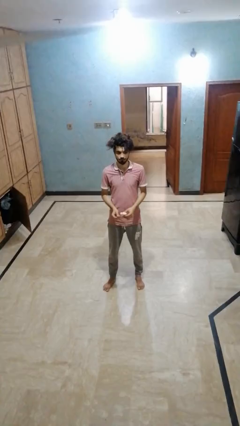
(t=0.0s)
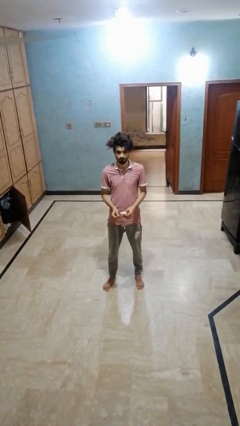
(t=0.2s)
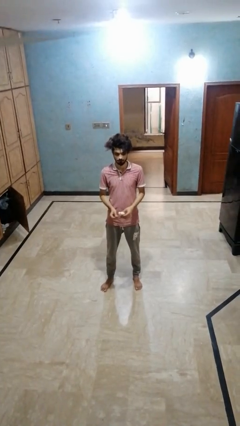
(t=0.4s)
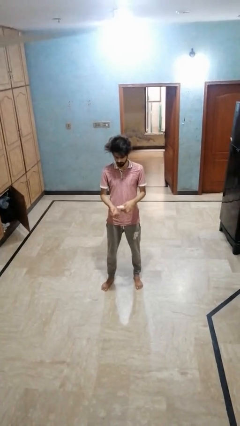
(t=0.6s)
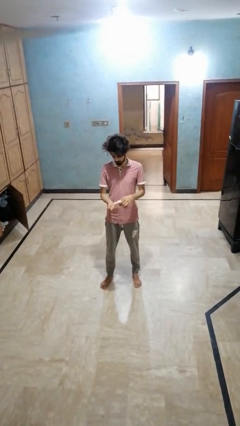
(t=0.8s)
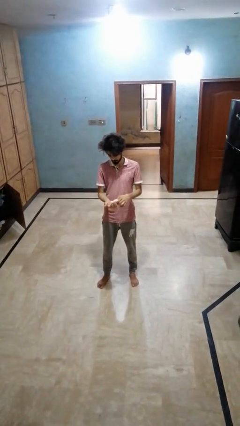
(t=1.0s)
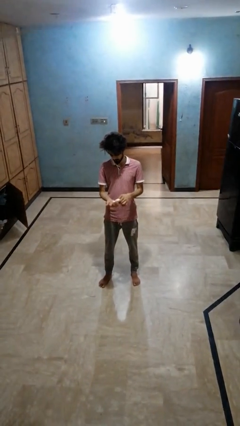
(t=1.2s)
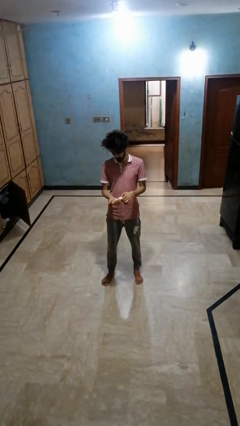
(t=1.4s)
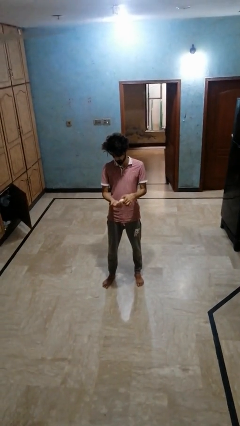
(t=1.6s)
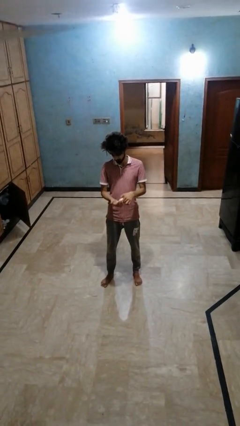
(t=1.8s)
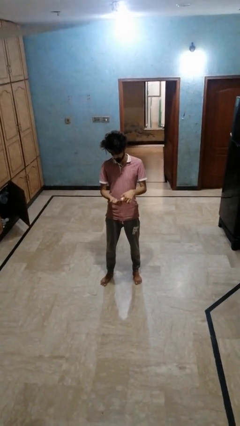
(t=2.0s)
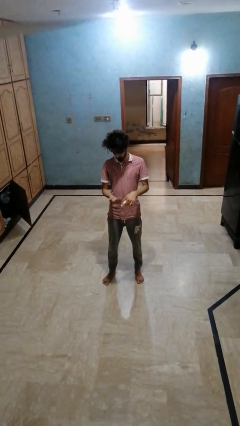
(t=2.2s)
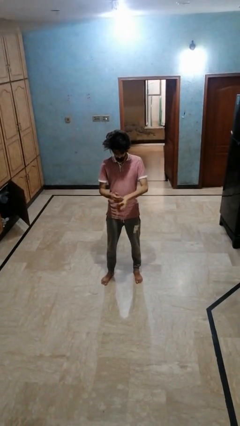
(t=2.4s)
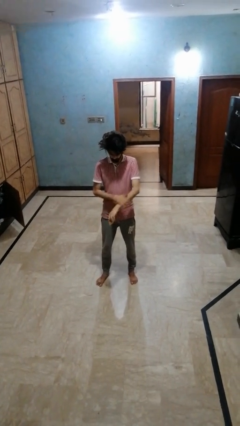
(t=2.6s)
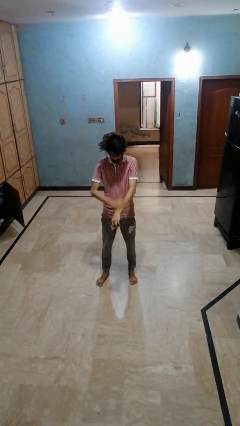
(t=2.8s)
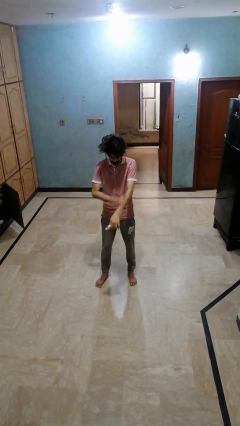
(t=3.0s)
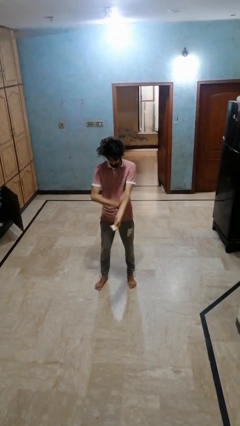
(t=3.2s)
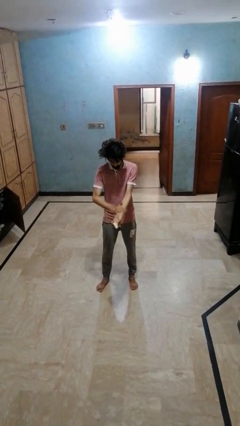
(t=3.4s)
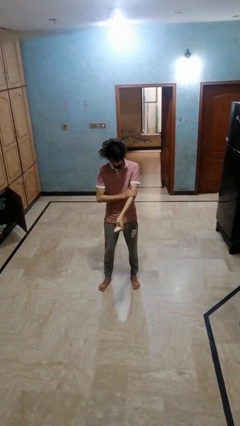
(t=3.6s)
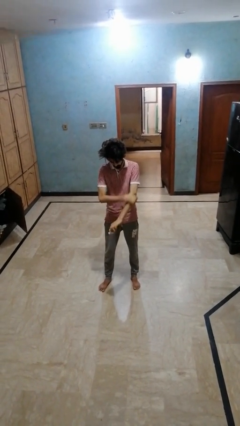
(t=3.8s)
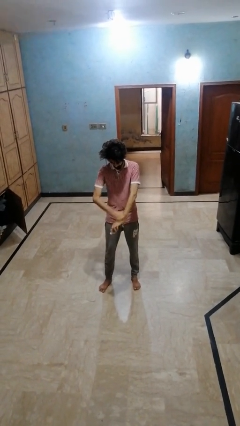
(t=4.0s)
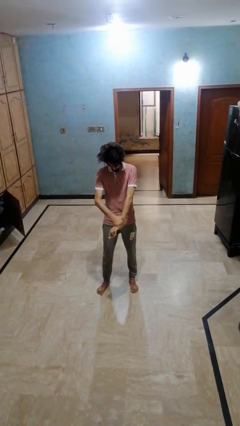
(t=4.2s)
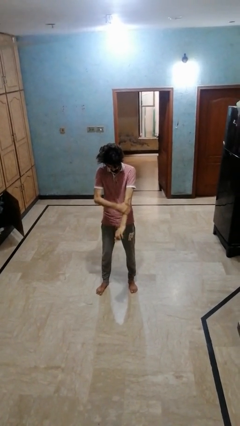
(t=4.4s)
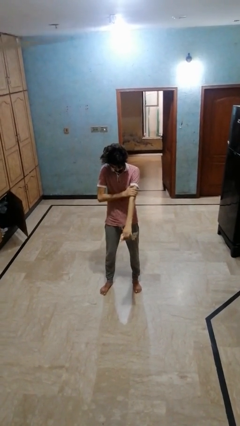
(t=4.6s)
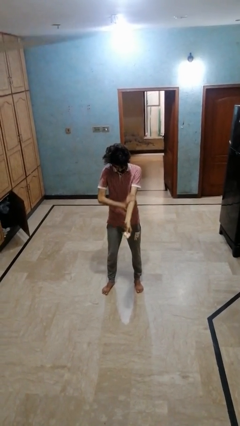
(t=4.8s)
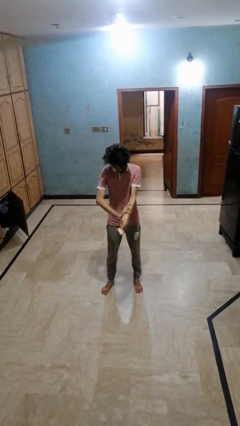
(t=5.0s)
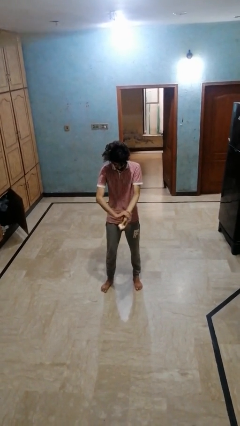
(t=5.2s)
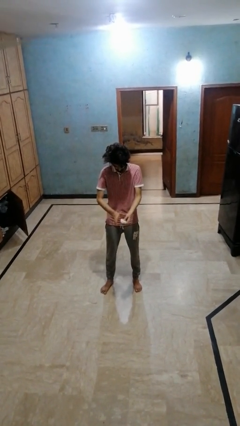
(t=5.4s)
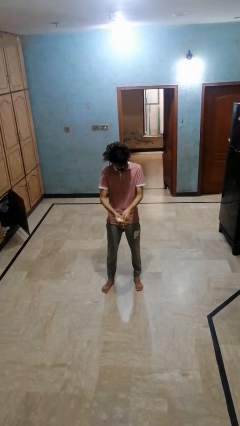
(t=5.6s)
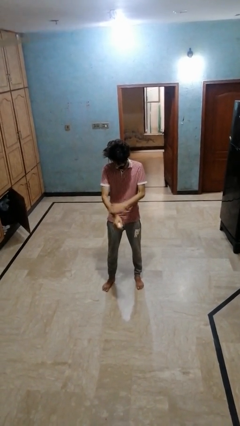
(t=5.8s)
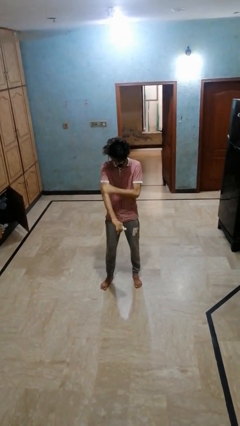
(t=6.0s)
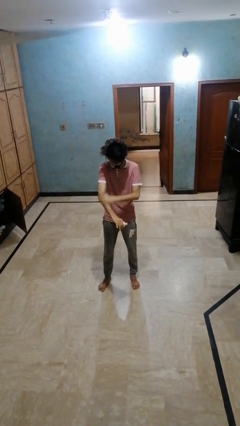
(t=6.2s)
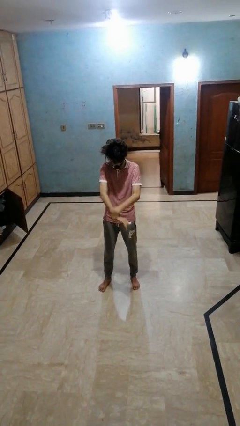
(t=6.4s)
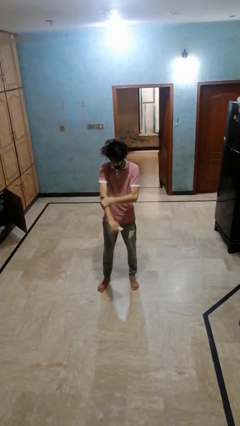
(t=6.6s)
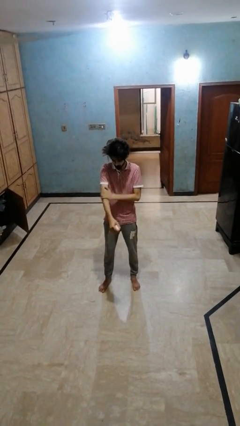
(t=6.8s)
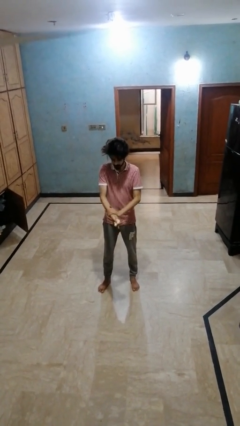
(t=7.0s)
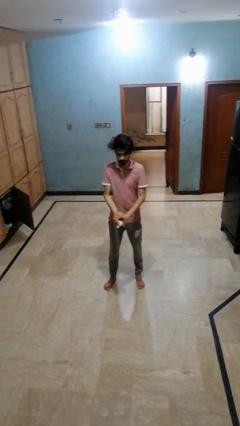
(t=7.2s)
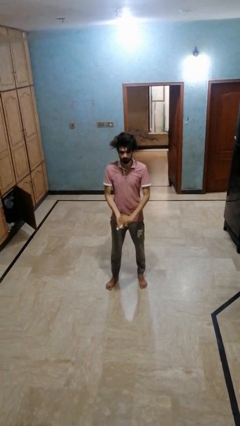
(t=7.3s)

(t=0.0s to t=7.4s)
person applies sunscreen

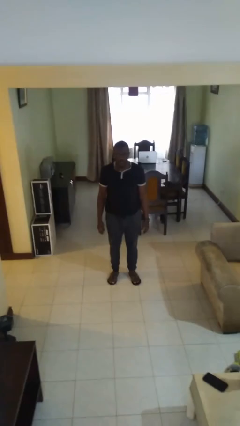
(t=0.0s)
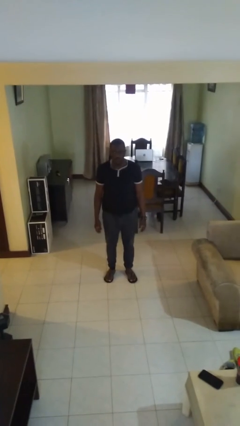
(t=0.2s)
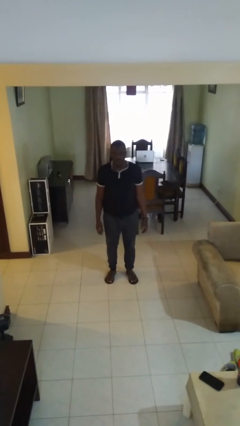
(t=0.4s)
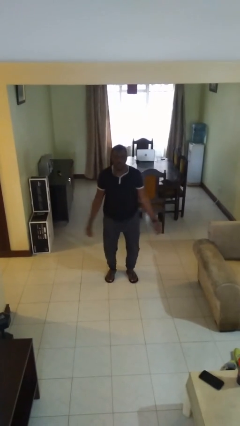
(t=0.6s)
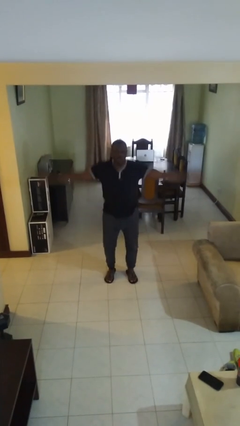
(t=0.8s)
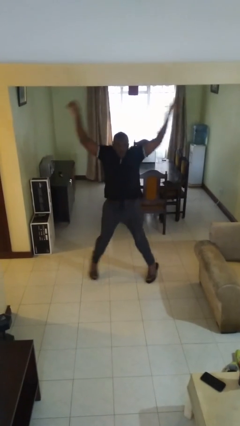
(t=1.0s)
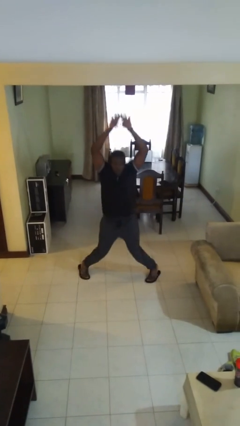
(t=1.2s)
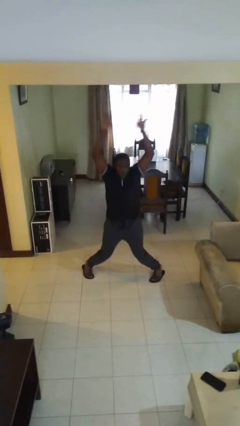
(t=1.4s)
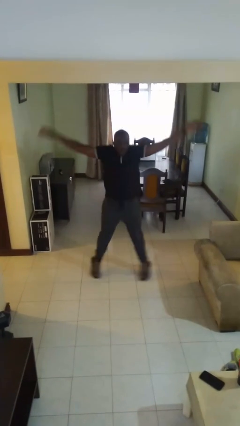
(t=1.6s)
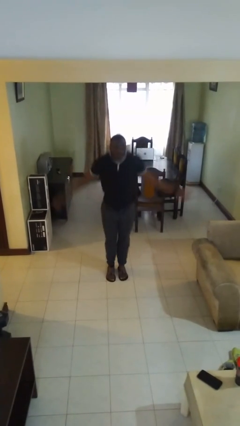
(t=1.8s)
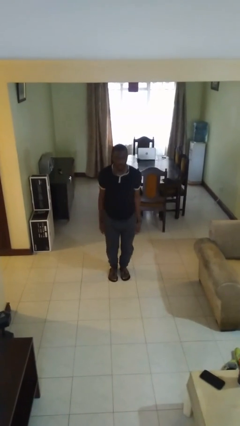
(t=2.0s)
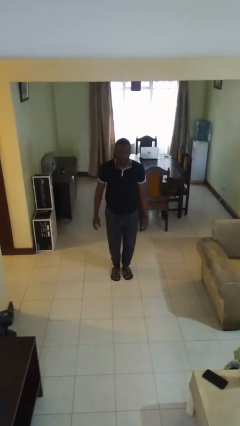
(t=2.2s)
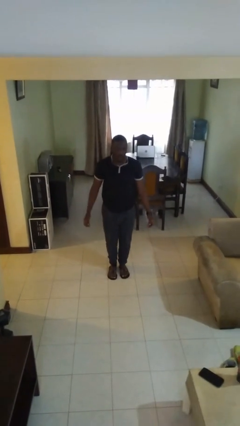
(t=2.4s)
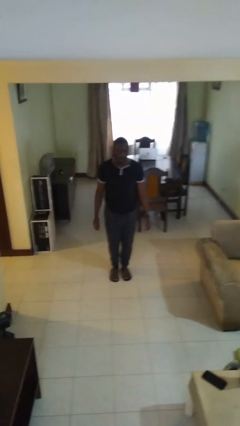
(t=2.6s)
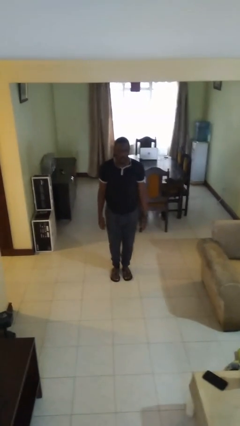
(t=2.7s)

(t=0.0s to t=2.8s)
person exercises with jumping jacks

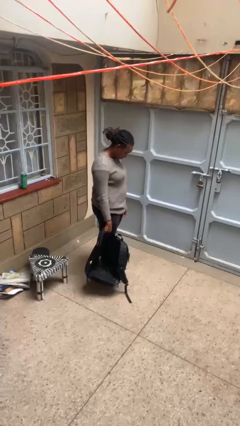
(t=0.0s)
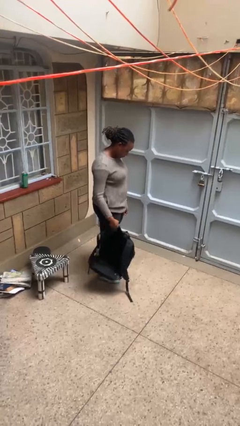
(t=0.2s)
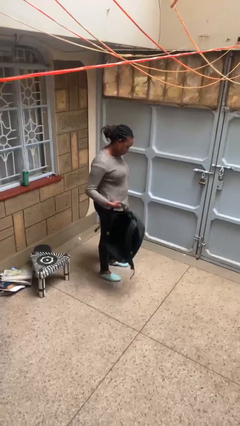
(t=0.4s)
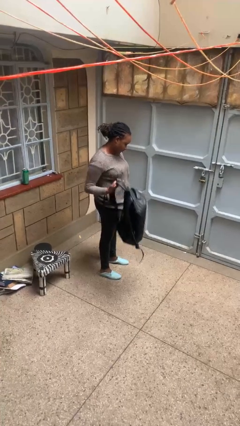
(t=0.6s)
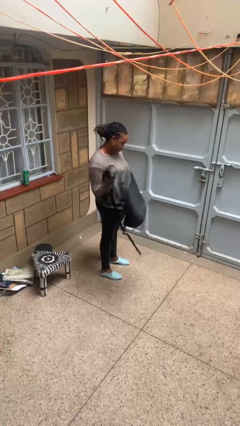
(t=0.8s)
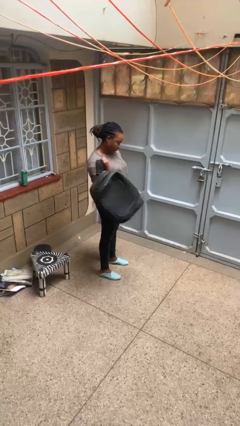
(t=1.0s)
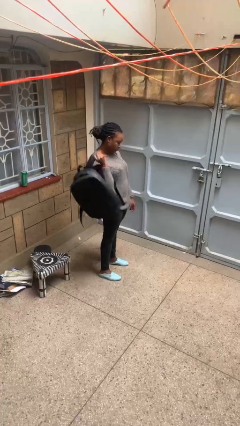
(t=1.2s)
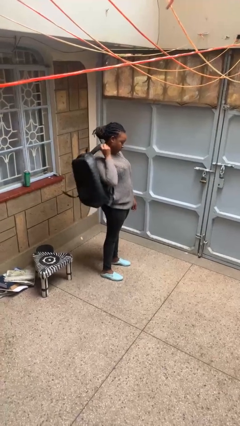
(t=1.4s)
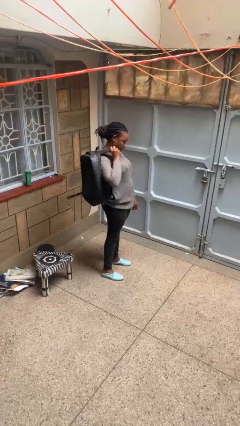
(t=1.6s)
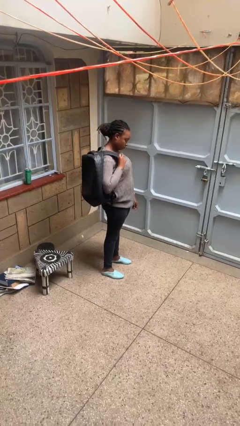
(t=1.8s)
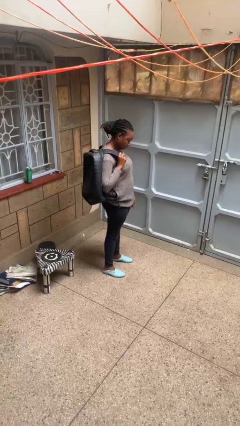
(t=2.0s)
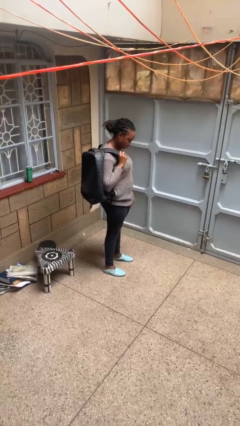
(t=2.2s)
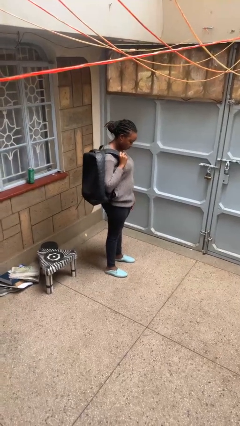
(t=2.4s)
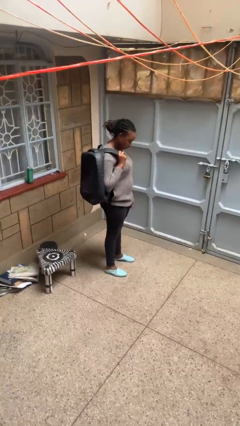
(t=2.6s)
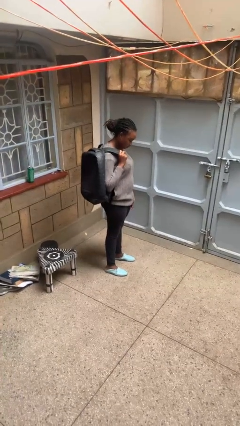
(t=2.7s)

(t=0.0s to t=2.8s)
person puts on backpack

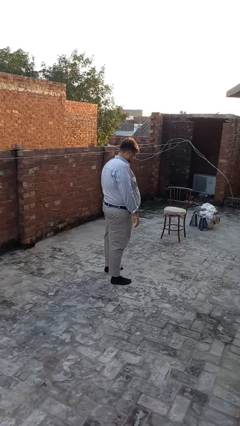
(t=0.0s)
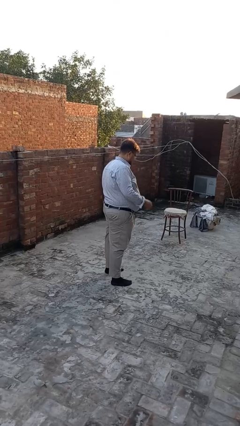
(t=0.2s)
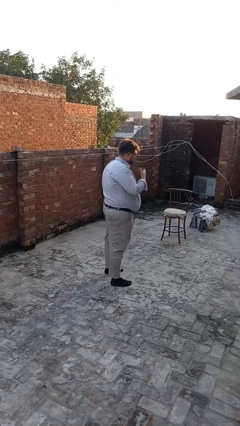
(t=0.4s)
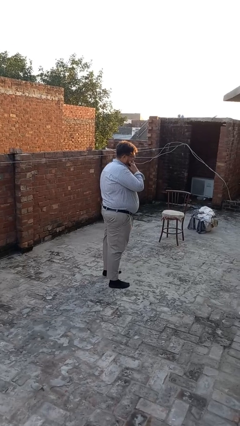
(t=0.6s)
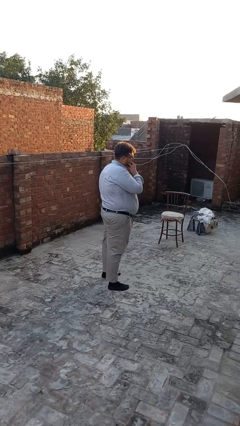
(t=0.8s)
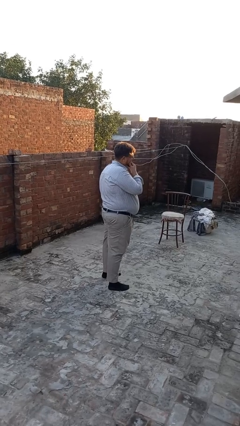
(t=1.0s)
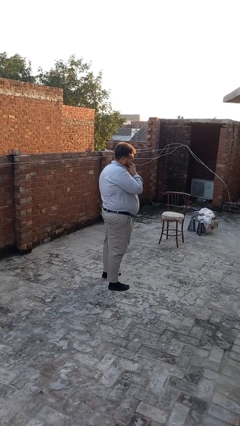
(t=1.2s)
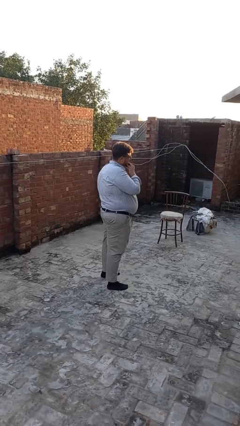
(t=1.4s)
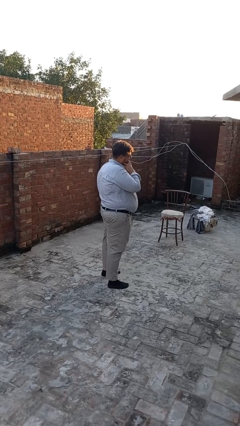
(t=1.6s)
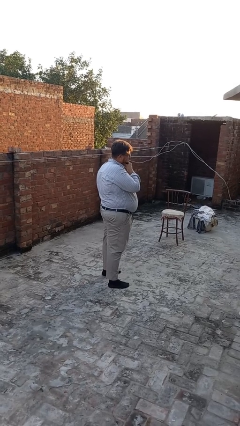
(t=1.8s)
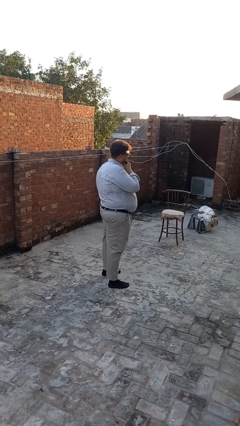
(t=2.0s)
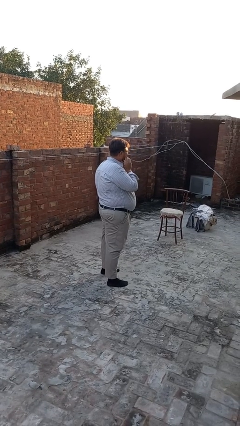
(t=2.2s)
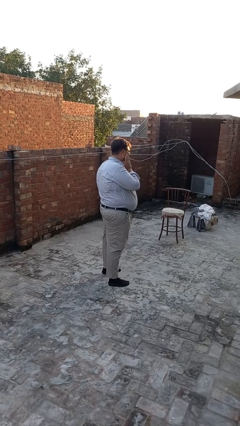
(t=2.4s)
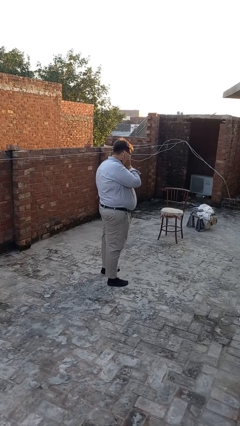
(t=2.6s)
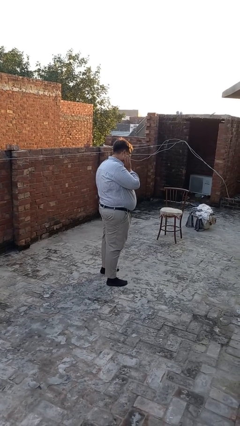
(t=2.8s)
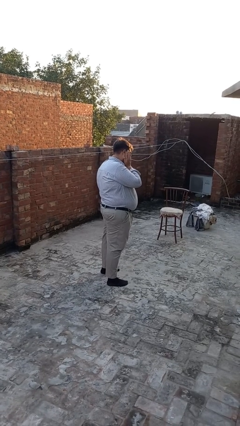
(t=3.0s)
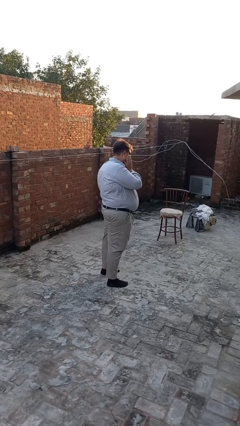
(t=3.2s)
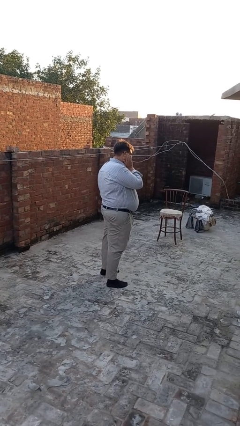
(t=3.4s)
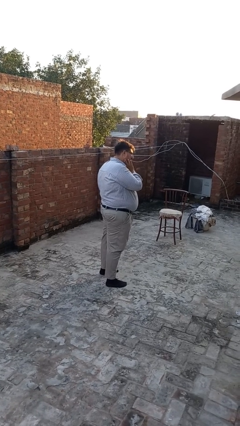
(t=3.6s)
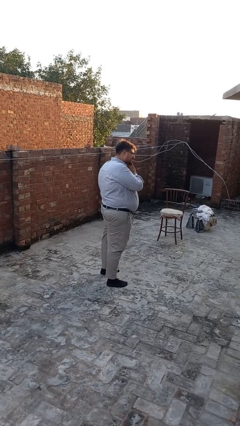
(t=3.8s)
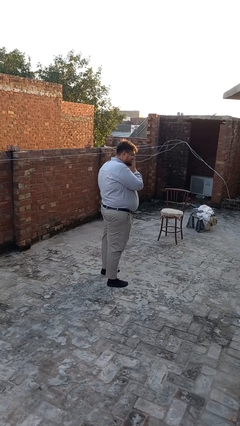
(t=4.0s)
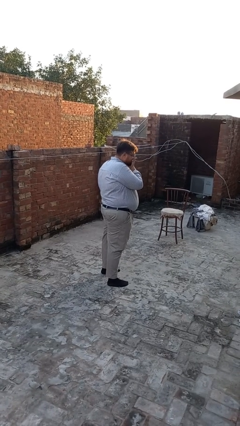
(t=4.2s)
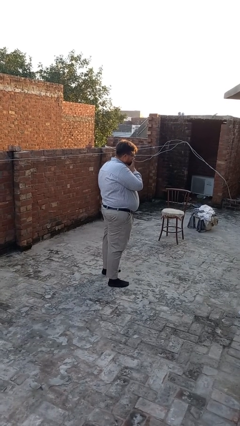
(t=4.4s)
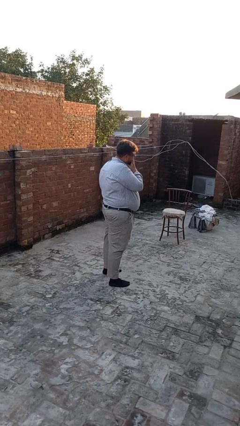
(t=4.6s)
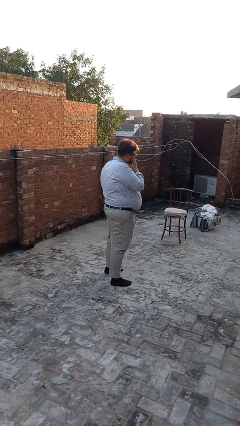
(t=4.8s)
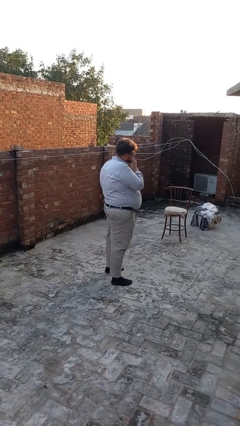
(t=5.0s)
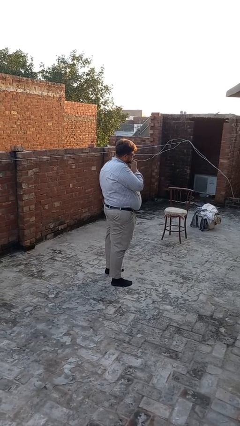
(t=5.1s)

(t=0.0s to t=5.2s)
person scratches face
